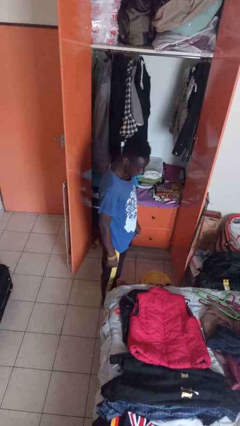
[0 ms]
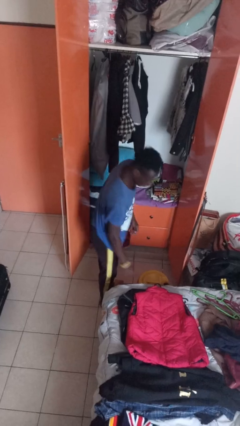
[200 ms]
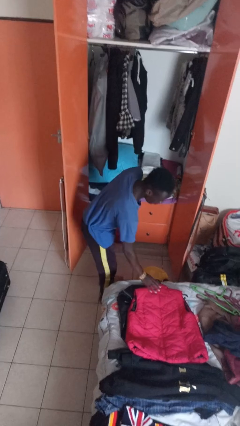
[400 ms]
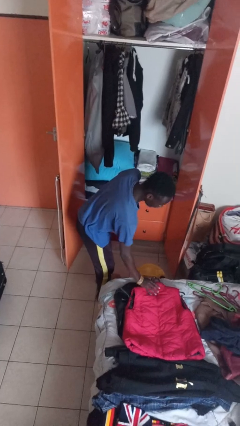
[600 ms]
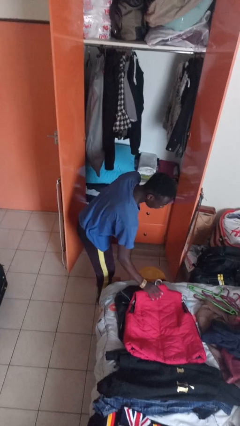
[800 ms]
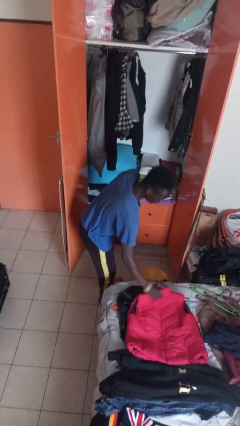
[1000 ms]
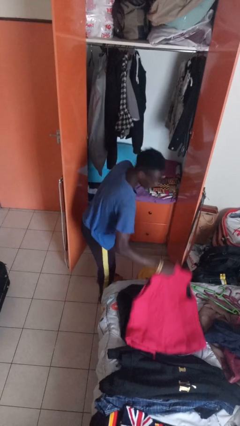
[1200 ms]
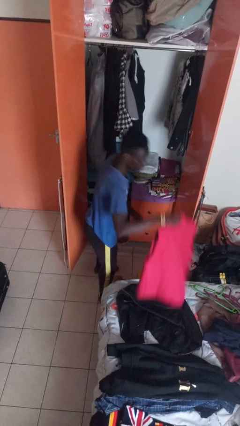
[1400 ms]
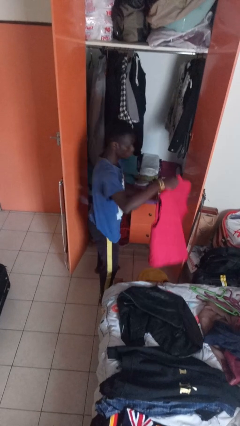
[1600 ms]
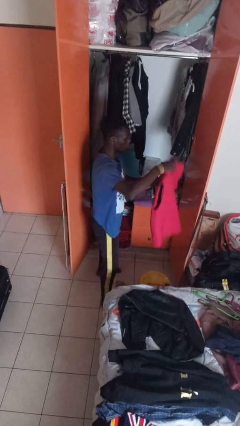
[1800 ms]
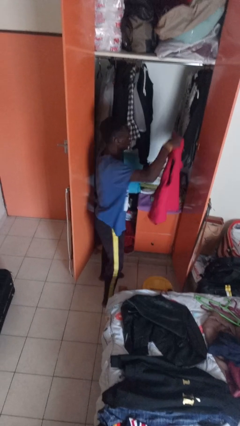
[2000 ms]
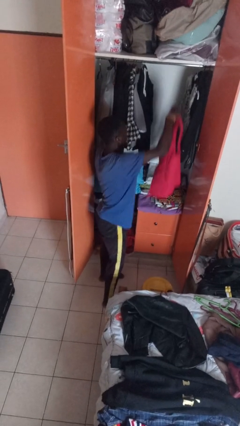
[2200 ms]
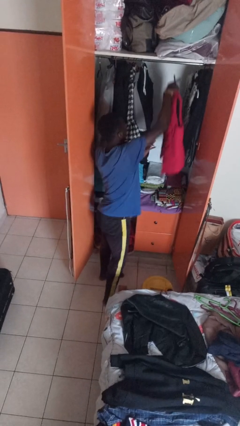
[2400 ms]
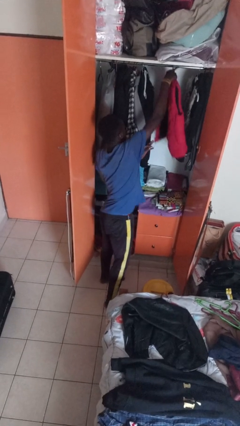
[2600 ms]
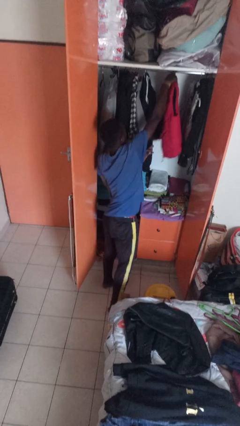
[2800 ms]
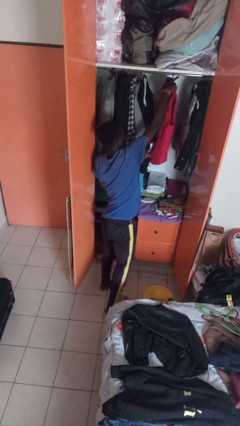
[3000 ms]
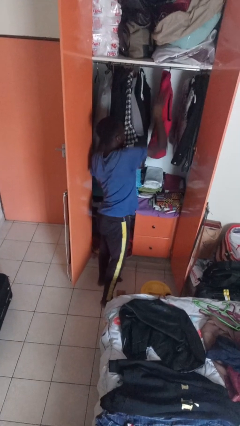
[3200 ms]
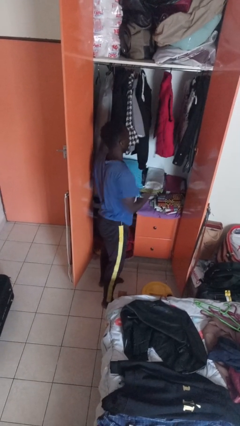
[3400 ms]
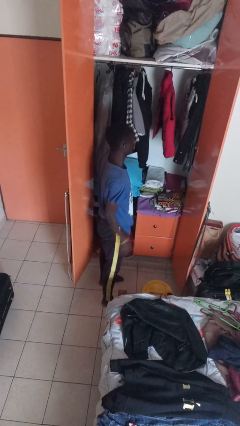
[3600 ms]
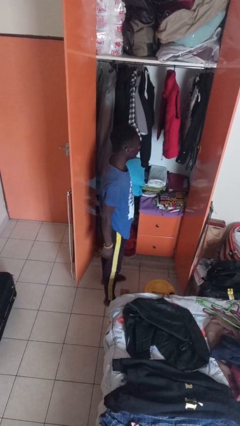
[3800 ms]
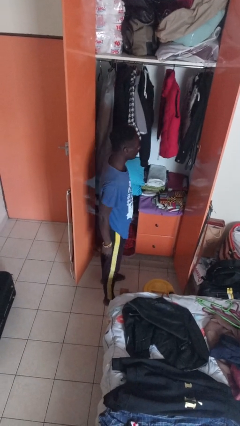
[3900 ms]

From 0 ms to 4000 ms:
person puts clothes into closet

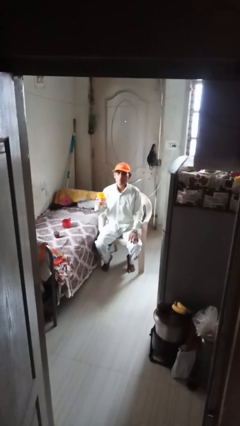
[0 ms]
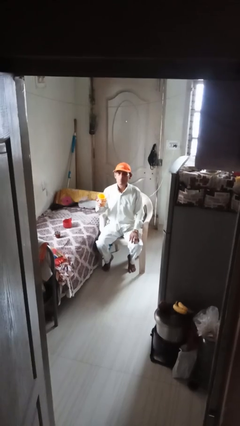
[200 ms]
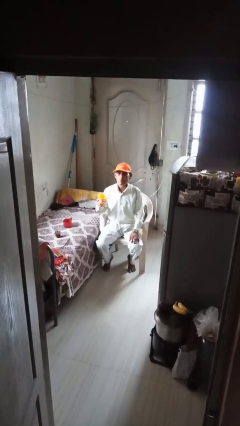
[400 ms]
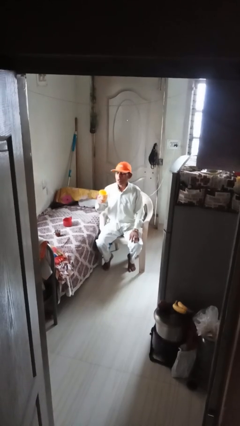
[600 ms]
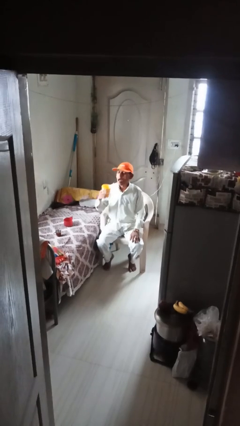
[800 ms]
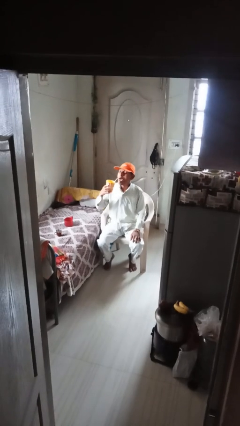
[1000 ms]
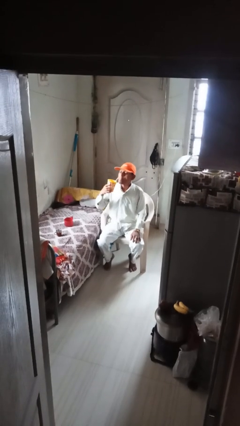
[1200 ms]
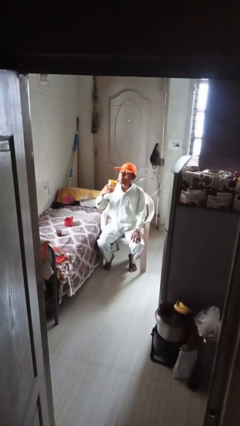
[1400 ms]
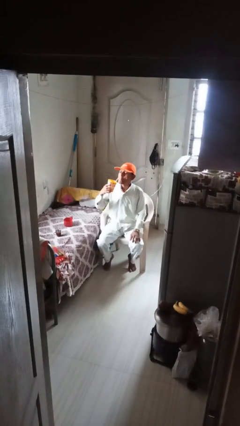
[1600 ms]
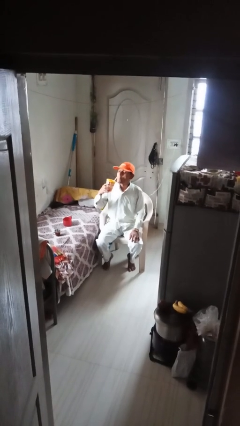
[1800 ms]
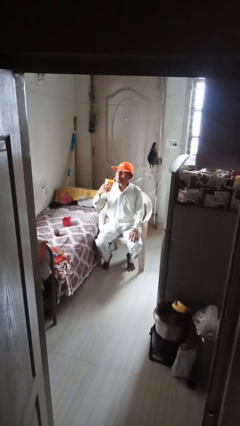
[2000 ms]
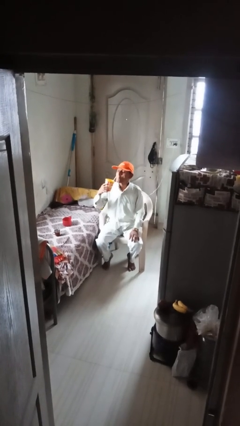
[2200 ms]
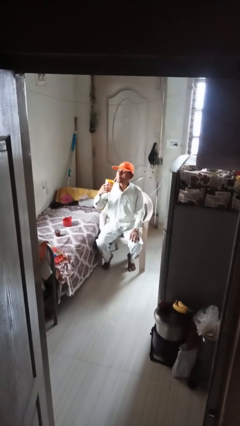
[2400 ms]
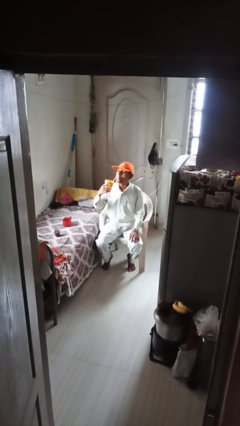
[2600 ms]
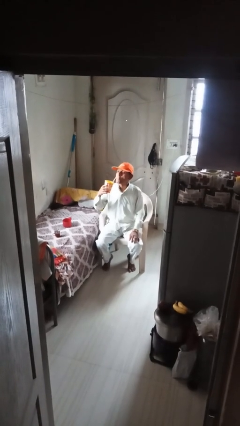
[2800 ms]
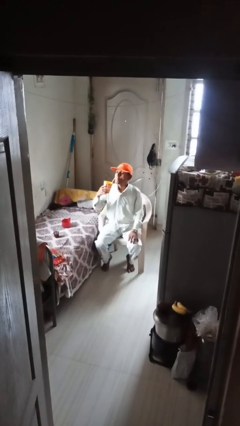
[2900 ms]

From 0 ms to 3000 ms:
person drinks from straw

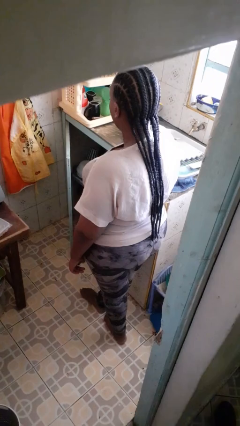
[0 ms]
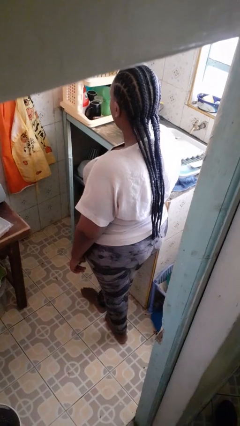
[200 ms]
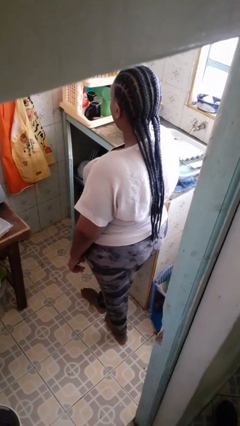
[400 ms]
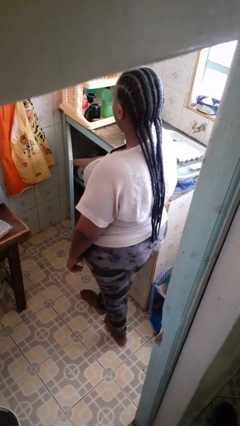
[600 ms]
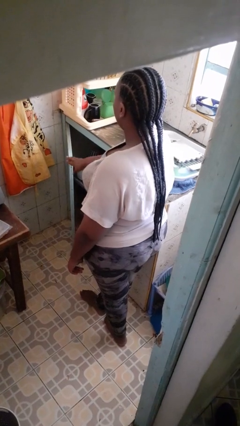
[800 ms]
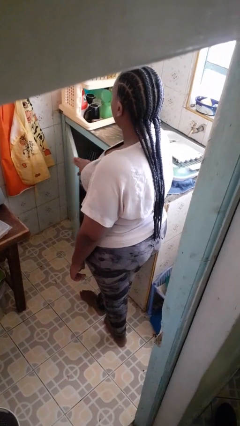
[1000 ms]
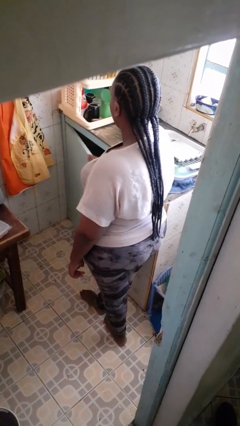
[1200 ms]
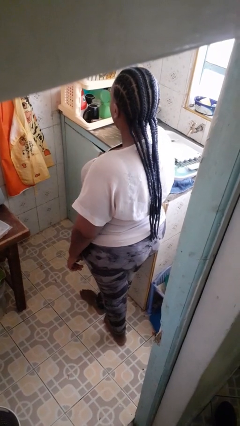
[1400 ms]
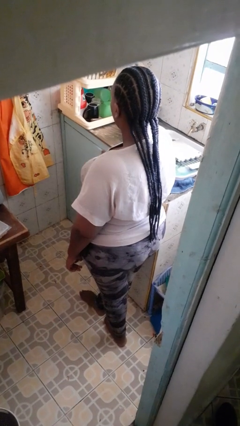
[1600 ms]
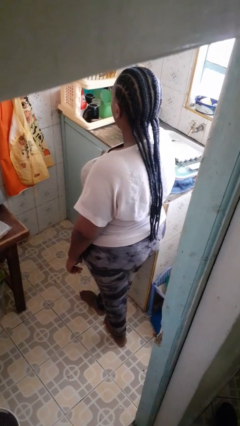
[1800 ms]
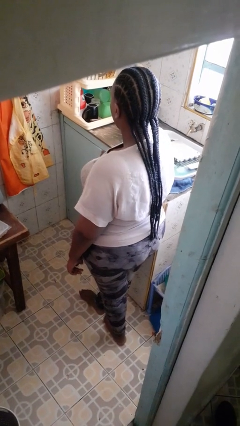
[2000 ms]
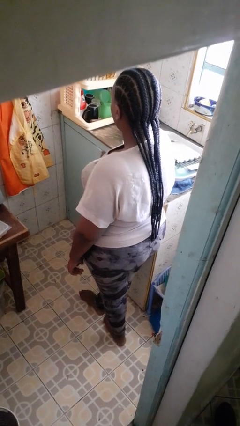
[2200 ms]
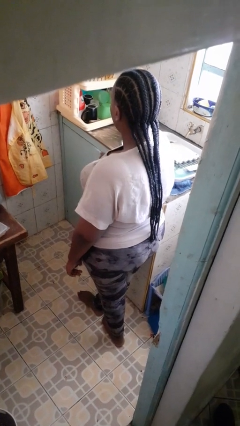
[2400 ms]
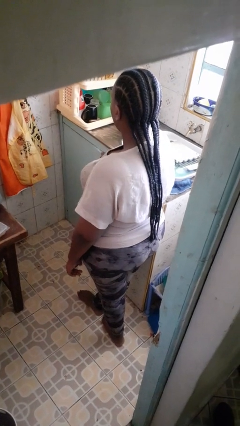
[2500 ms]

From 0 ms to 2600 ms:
person closes cabinet

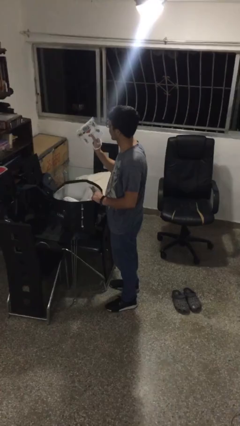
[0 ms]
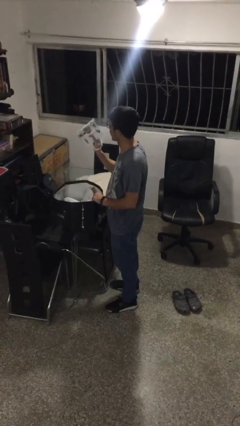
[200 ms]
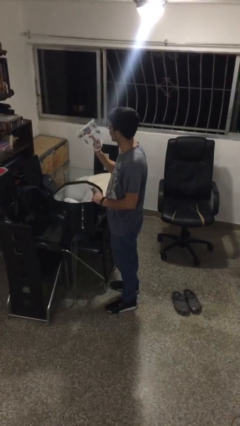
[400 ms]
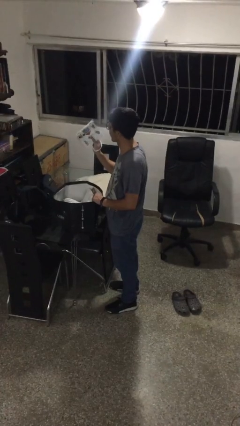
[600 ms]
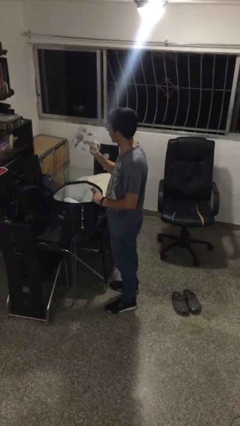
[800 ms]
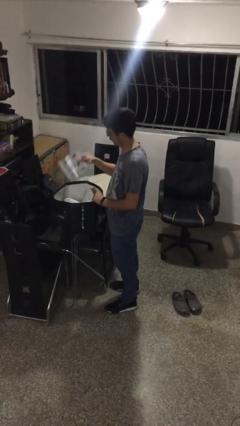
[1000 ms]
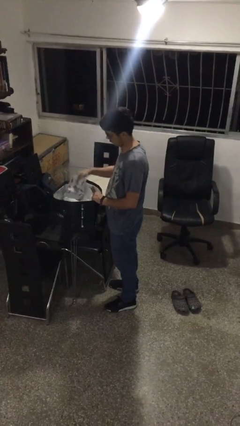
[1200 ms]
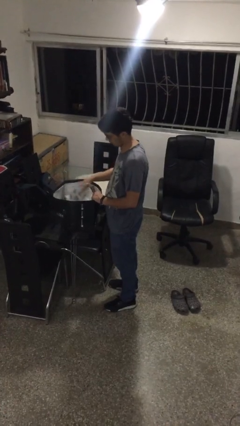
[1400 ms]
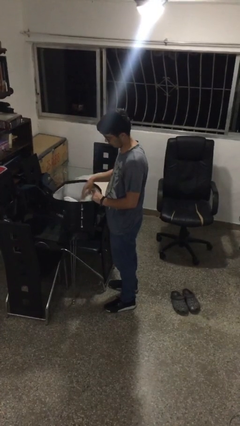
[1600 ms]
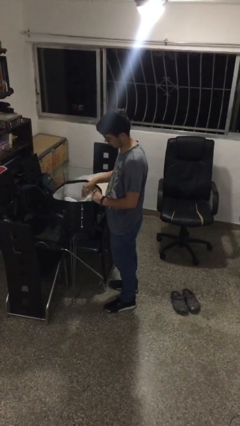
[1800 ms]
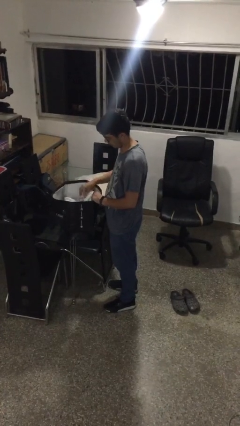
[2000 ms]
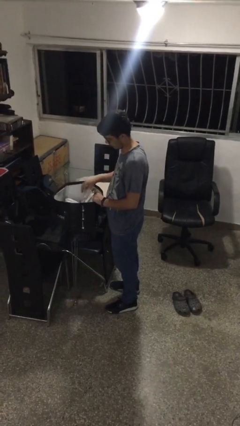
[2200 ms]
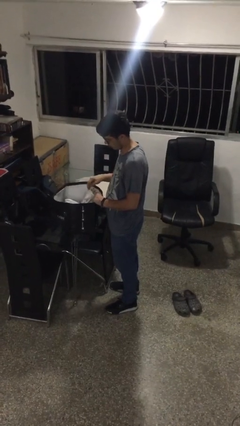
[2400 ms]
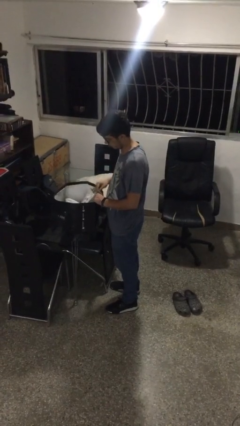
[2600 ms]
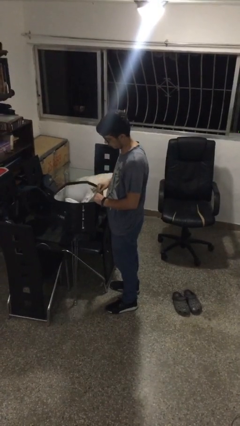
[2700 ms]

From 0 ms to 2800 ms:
person puts object into bag

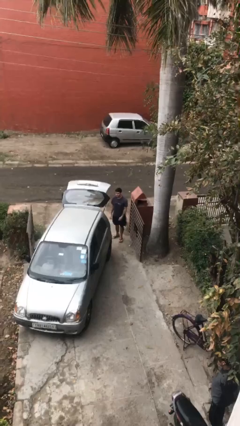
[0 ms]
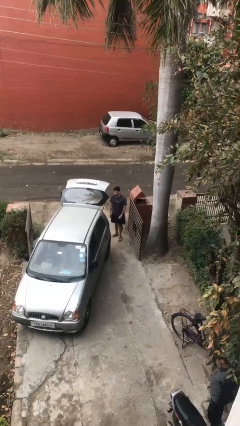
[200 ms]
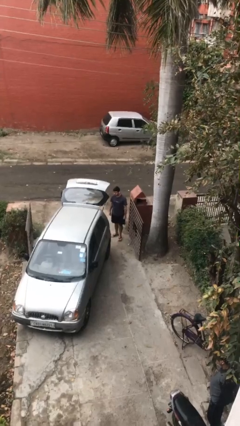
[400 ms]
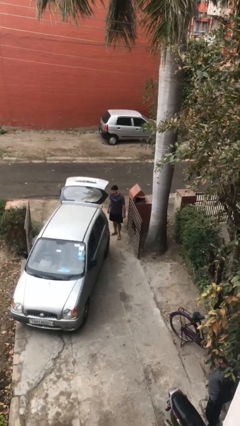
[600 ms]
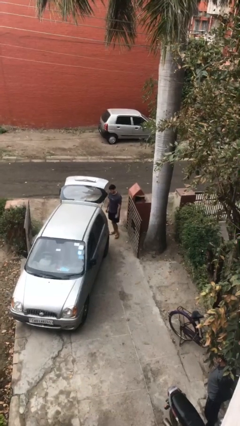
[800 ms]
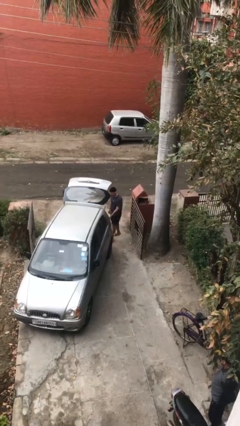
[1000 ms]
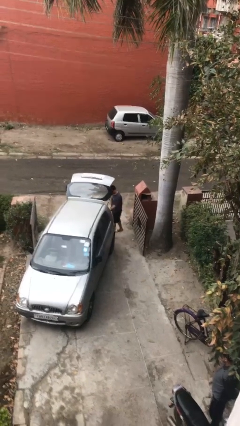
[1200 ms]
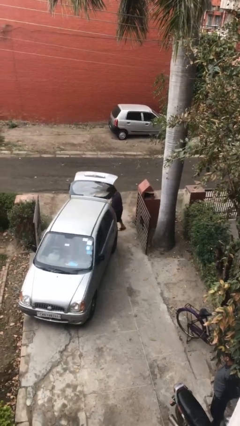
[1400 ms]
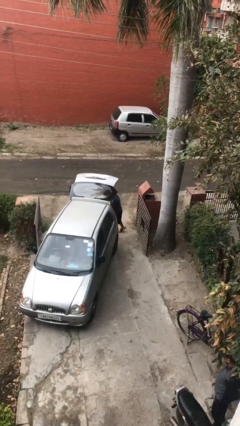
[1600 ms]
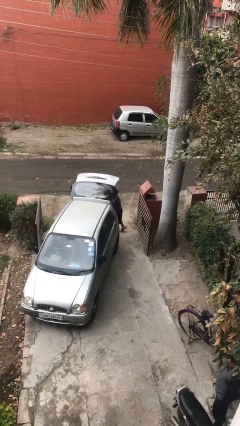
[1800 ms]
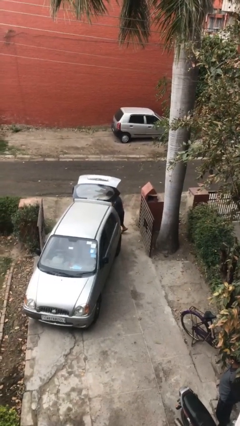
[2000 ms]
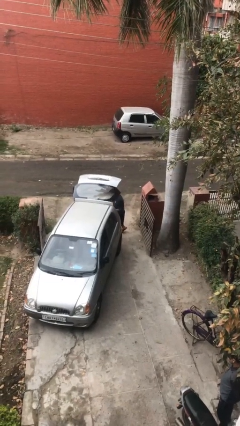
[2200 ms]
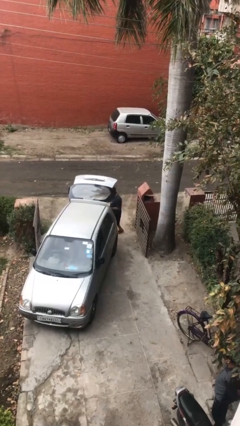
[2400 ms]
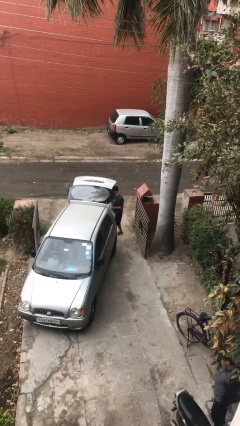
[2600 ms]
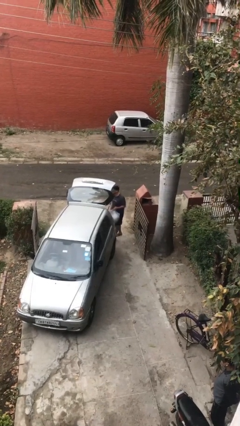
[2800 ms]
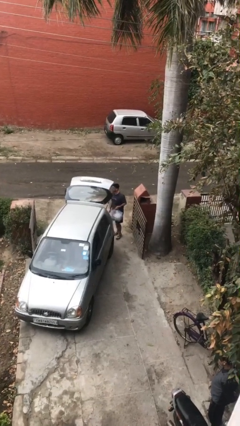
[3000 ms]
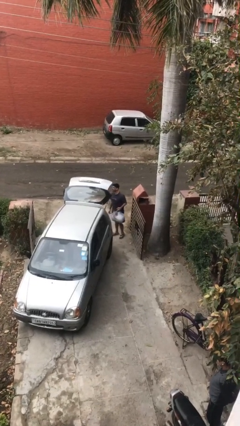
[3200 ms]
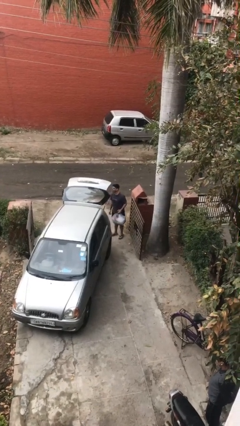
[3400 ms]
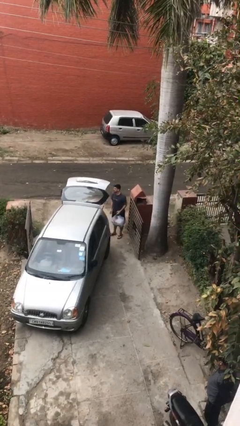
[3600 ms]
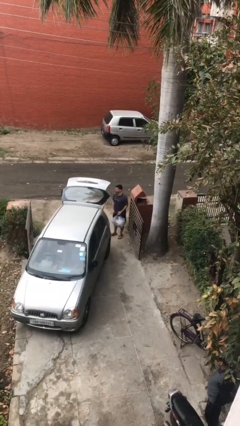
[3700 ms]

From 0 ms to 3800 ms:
person unloads car

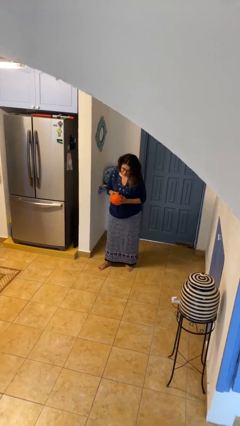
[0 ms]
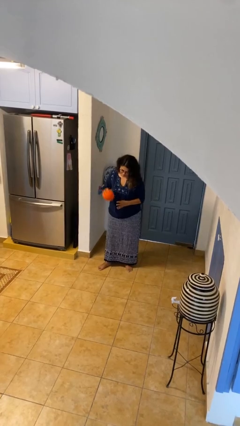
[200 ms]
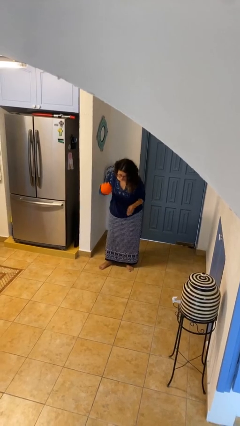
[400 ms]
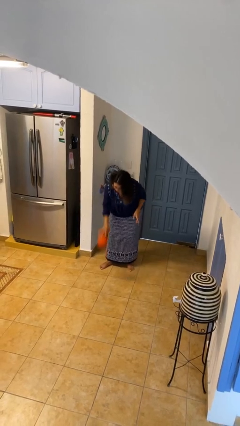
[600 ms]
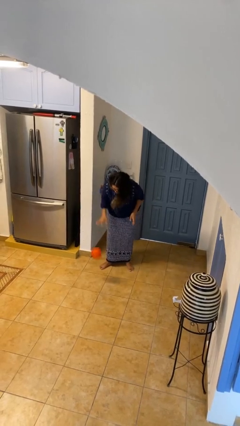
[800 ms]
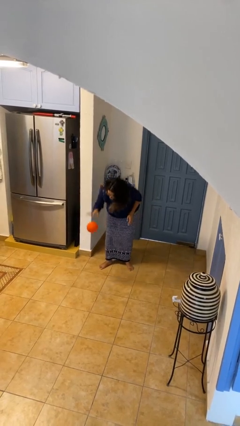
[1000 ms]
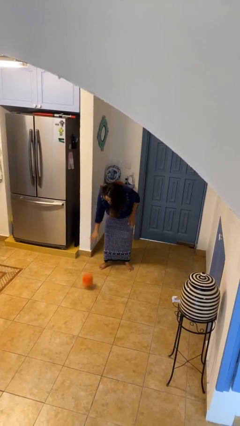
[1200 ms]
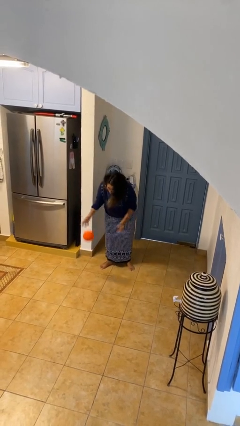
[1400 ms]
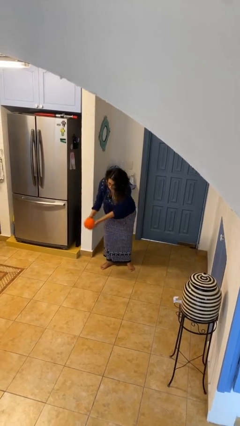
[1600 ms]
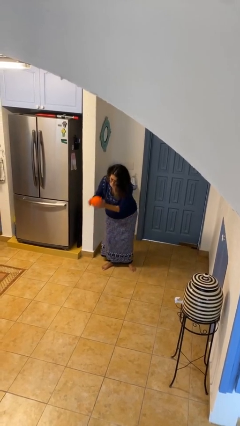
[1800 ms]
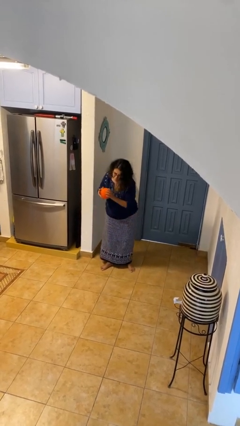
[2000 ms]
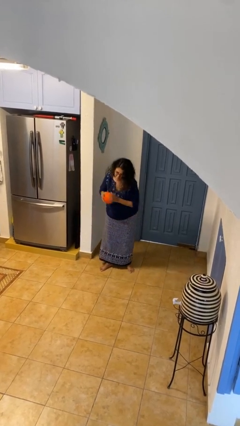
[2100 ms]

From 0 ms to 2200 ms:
person bounces ball on floor
